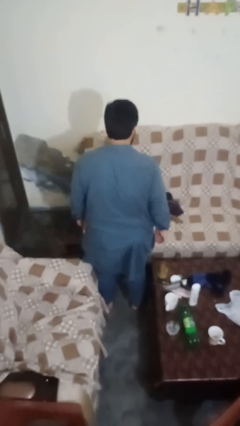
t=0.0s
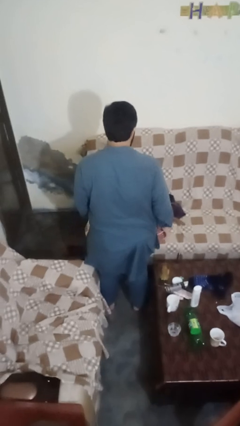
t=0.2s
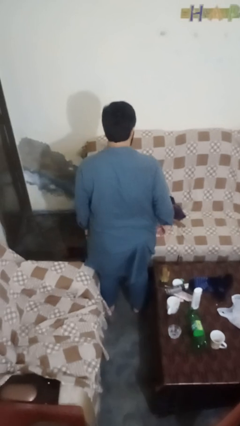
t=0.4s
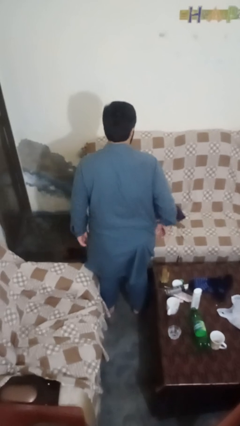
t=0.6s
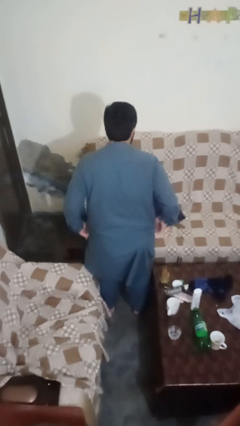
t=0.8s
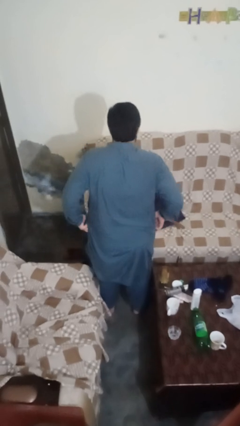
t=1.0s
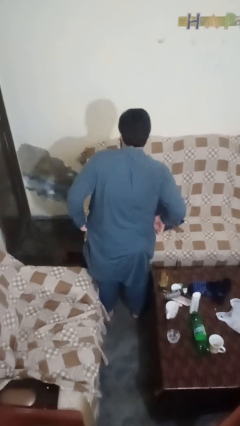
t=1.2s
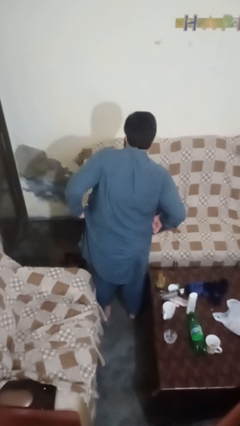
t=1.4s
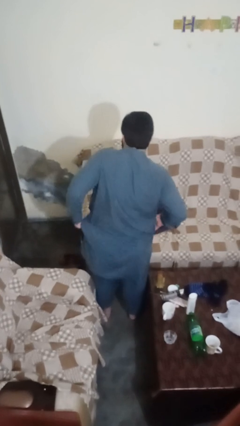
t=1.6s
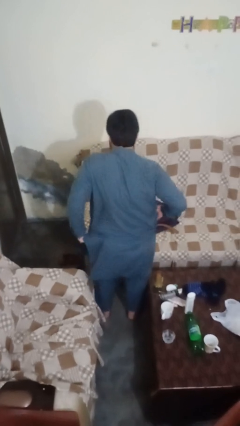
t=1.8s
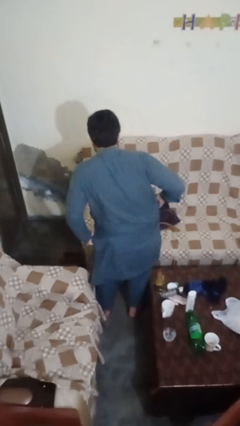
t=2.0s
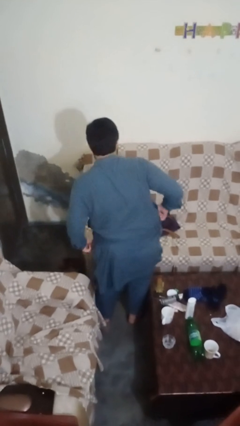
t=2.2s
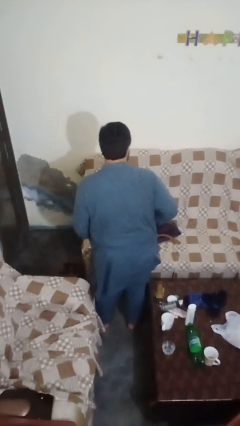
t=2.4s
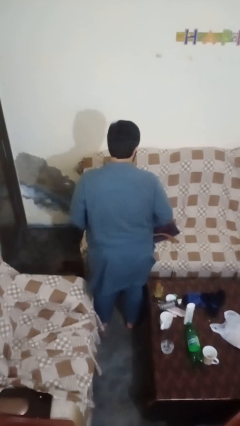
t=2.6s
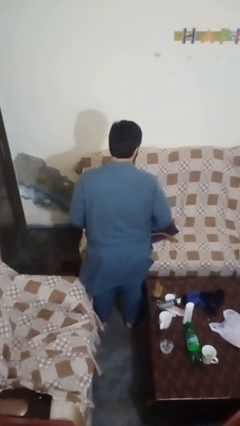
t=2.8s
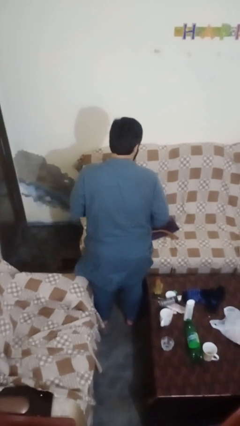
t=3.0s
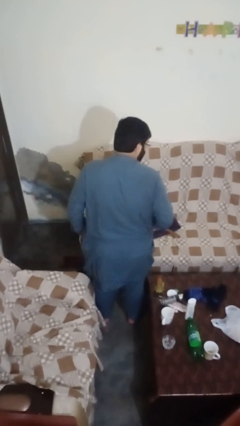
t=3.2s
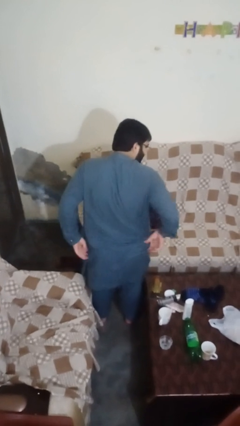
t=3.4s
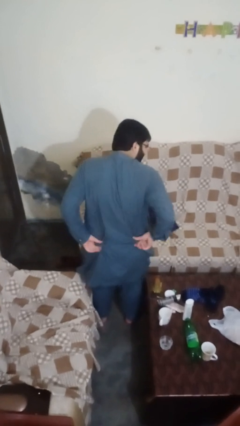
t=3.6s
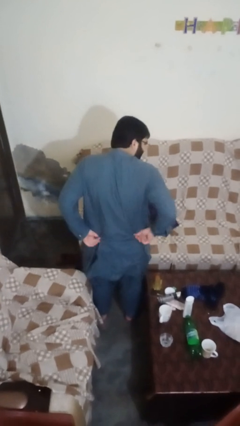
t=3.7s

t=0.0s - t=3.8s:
person hikes up pants

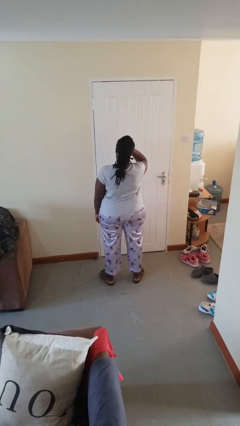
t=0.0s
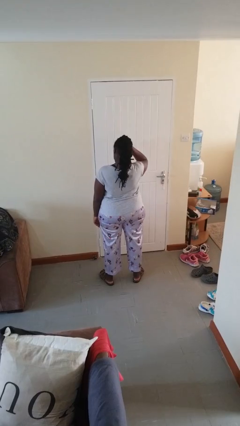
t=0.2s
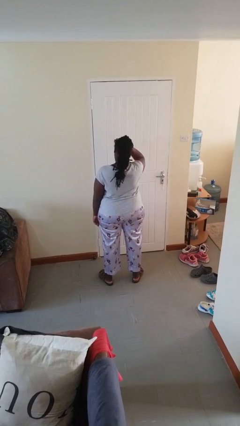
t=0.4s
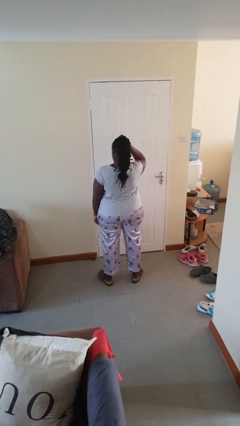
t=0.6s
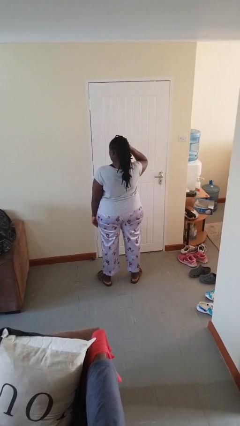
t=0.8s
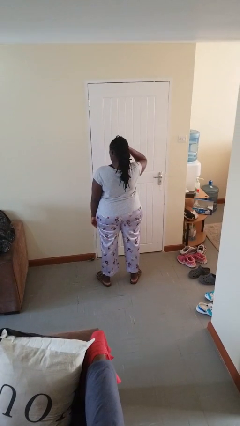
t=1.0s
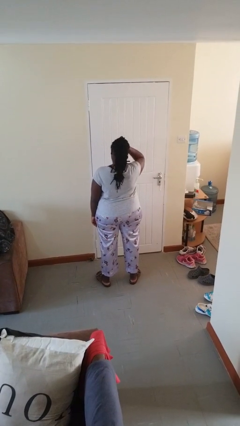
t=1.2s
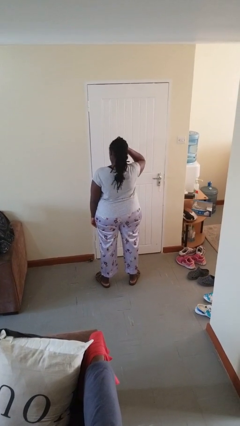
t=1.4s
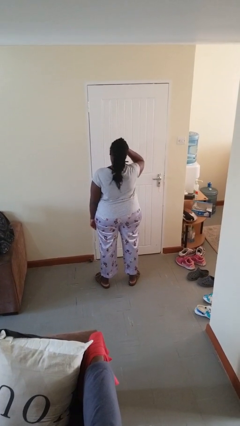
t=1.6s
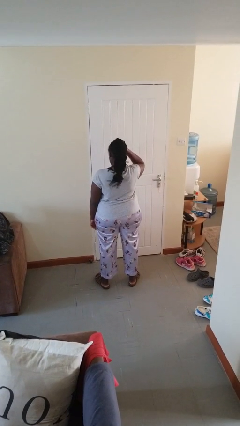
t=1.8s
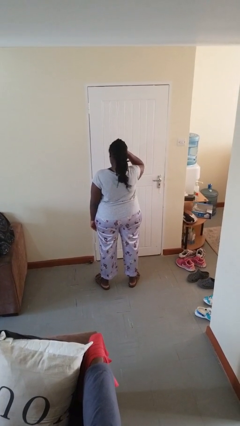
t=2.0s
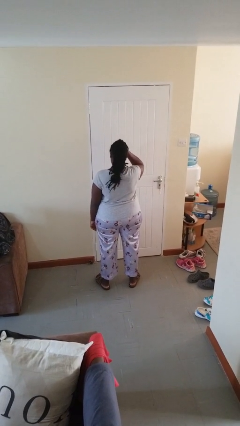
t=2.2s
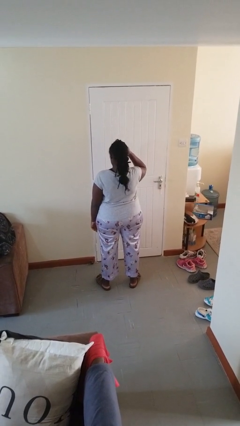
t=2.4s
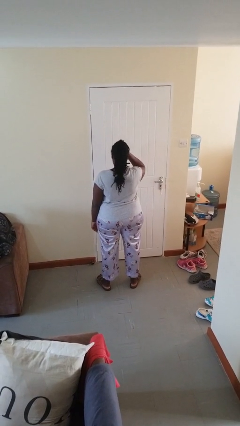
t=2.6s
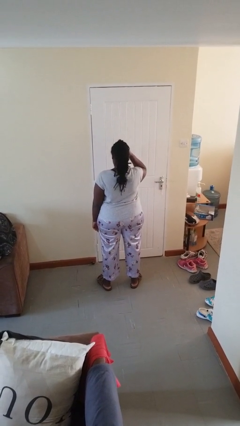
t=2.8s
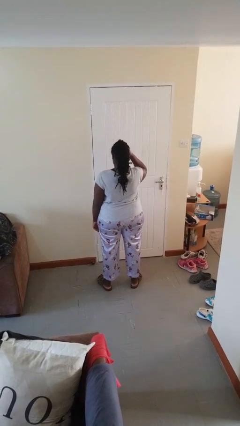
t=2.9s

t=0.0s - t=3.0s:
person scratches face

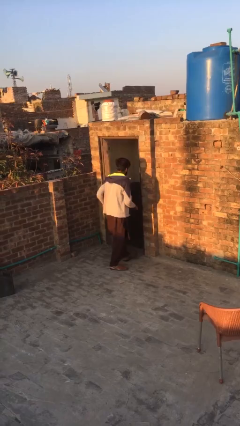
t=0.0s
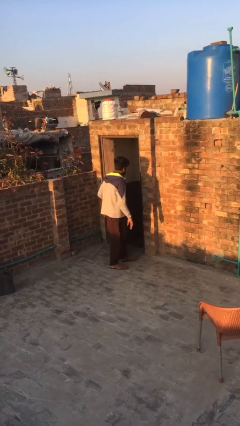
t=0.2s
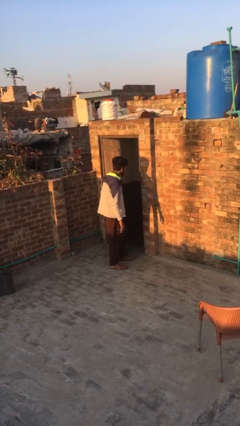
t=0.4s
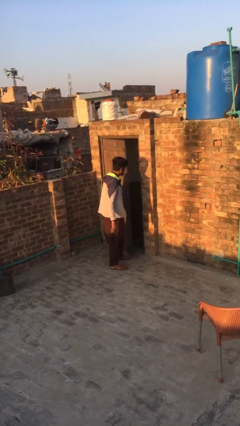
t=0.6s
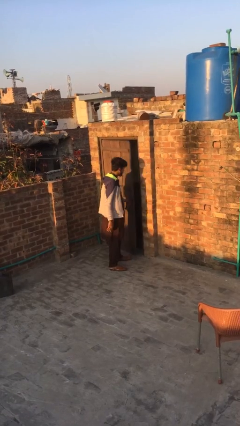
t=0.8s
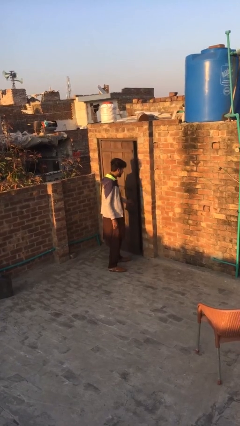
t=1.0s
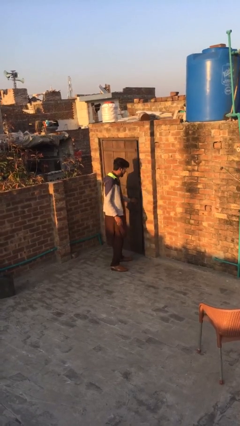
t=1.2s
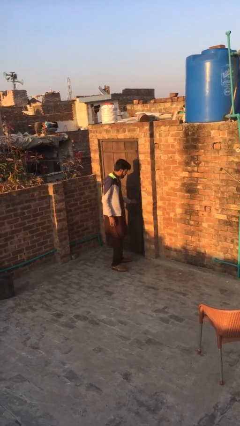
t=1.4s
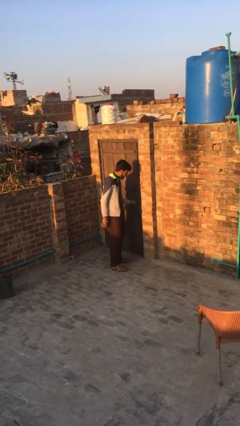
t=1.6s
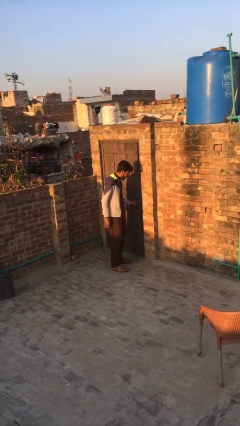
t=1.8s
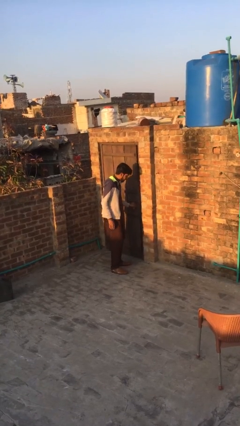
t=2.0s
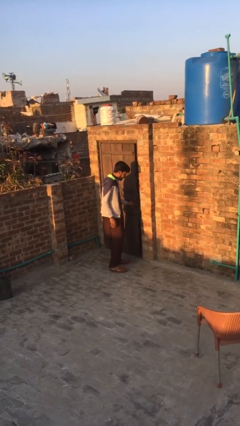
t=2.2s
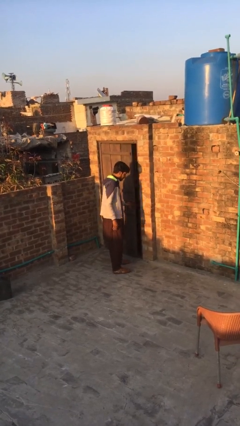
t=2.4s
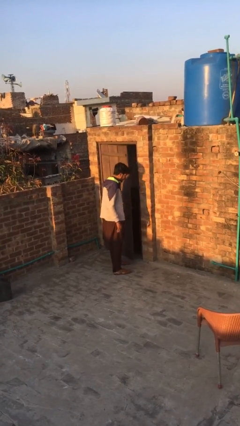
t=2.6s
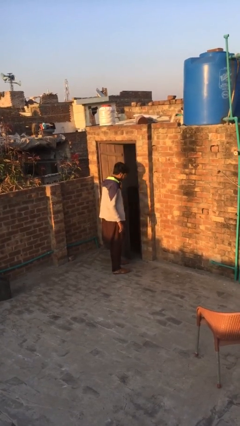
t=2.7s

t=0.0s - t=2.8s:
person closes facility door

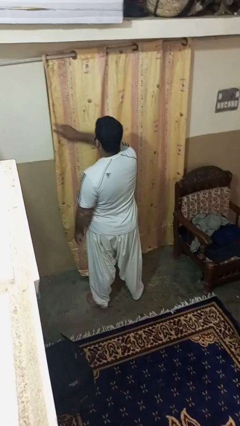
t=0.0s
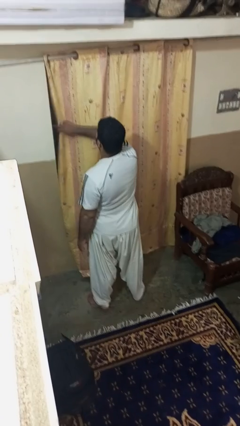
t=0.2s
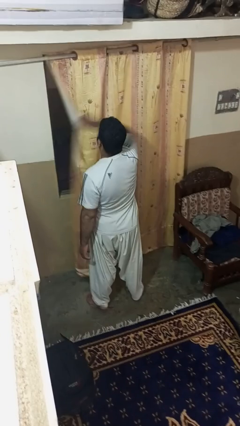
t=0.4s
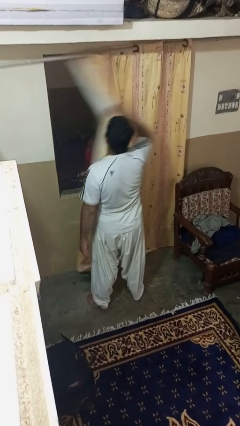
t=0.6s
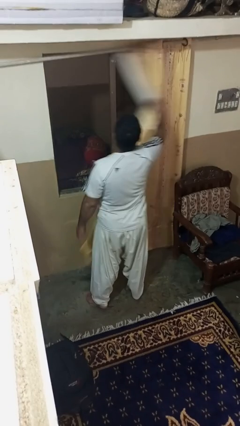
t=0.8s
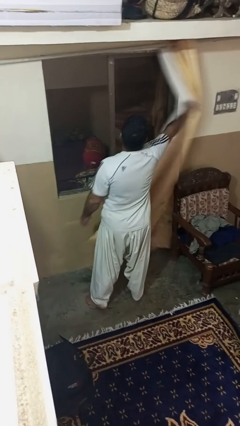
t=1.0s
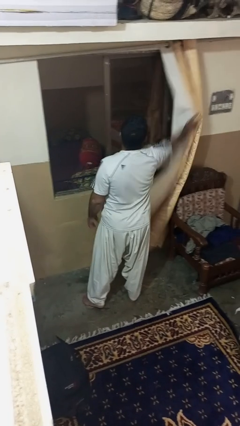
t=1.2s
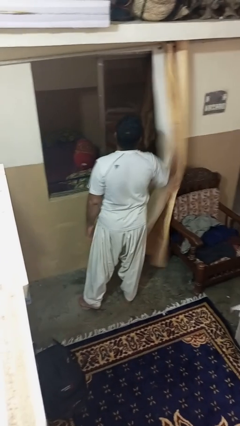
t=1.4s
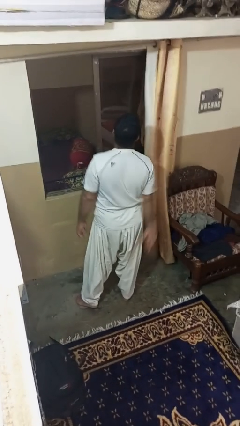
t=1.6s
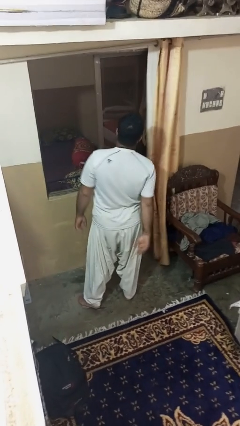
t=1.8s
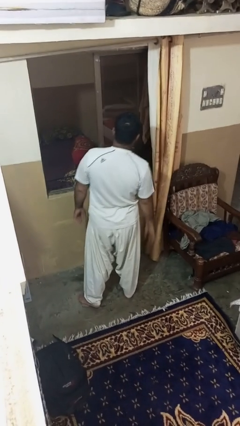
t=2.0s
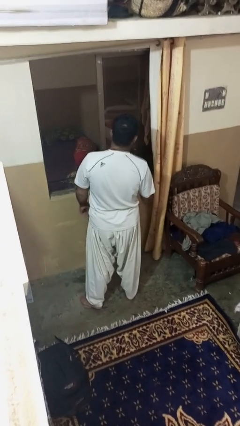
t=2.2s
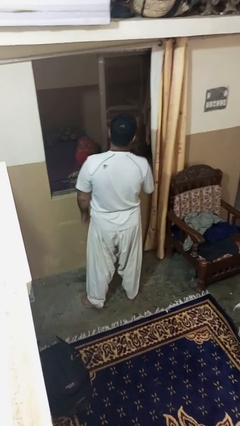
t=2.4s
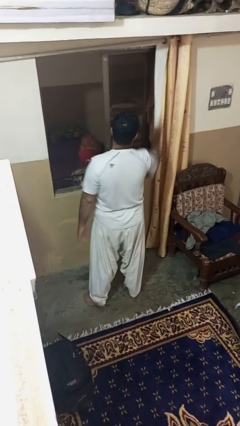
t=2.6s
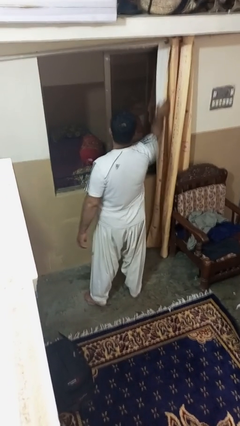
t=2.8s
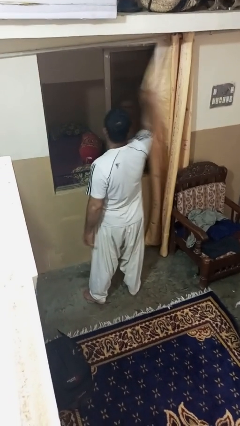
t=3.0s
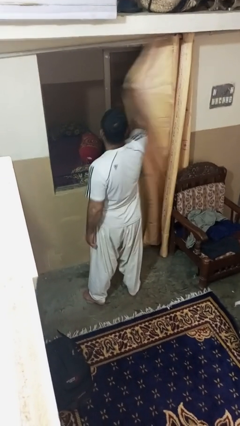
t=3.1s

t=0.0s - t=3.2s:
person opens curtains

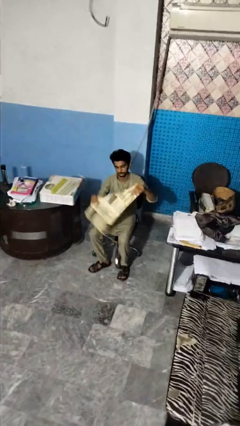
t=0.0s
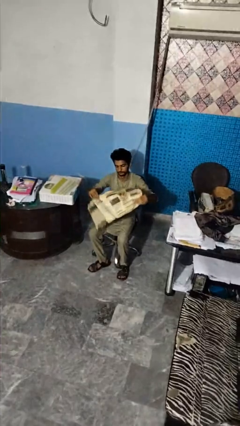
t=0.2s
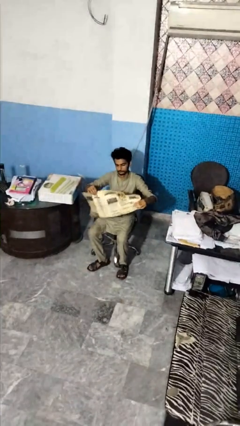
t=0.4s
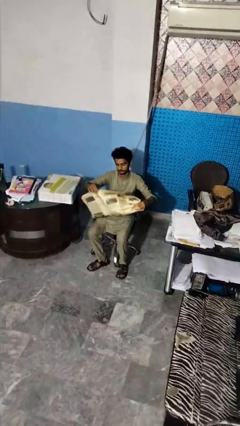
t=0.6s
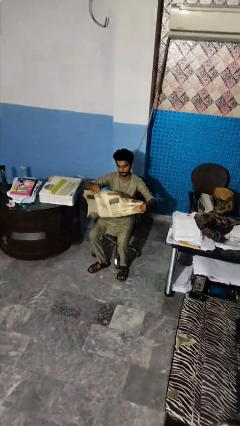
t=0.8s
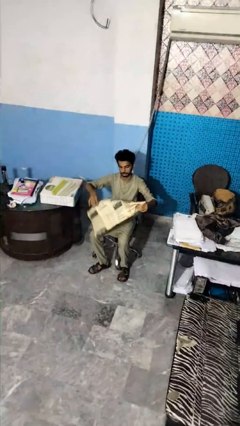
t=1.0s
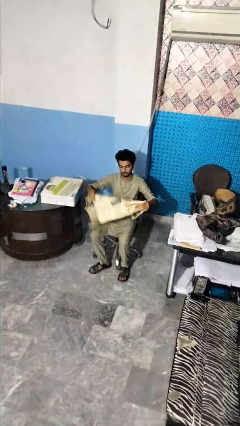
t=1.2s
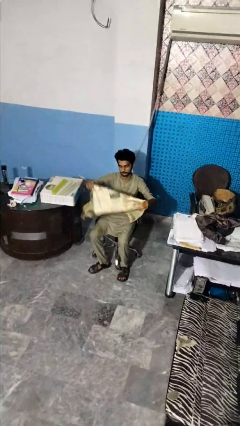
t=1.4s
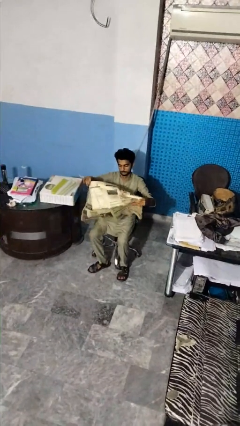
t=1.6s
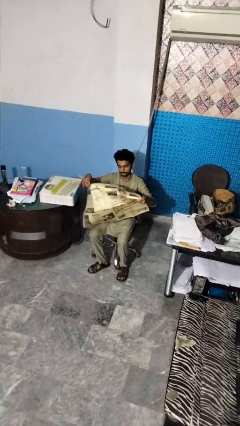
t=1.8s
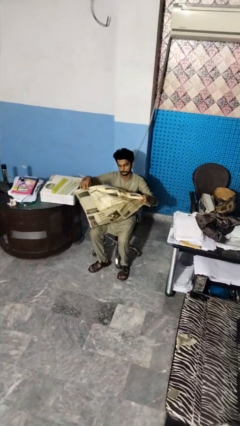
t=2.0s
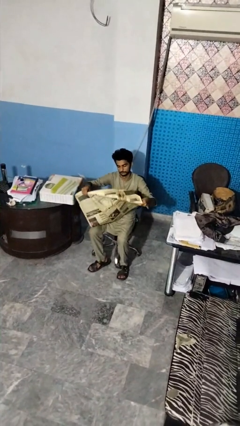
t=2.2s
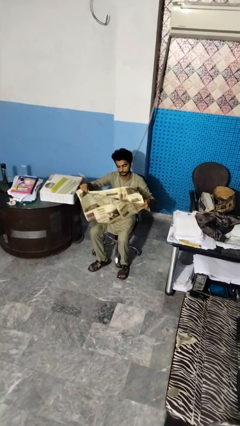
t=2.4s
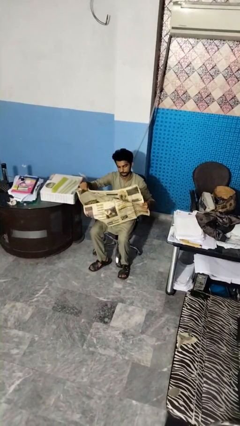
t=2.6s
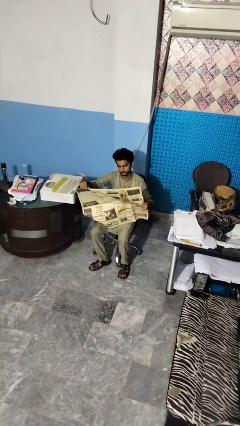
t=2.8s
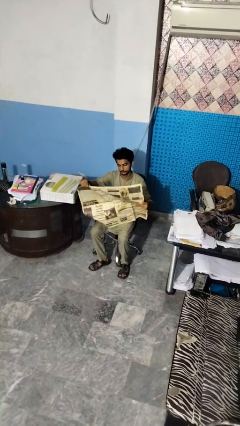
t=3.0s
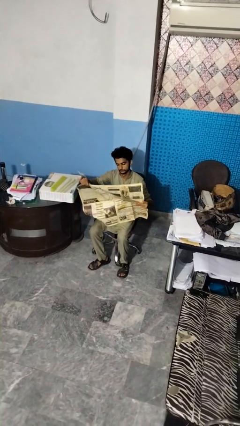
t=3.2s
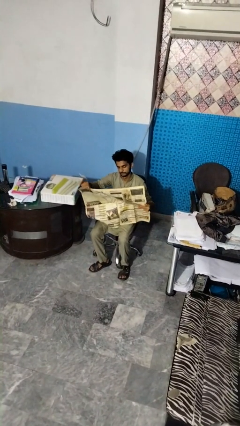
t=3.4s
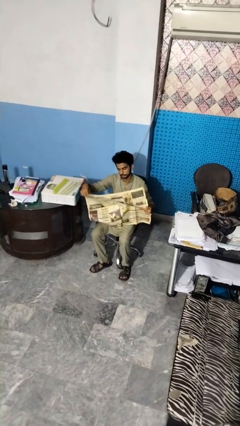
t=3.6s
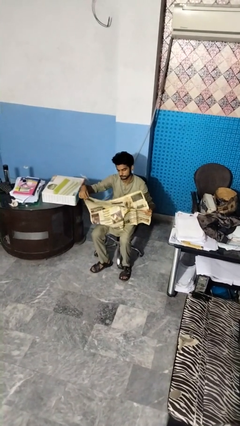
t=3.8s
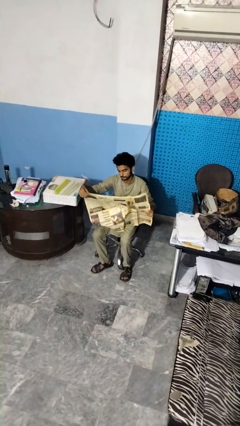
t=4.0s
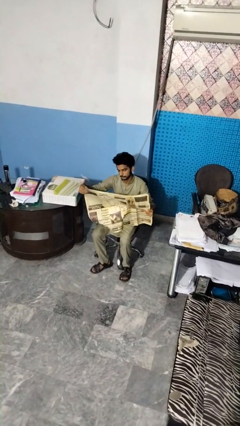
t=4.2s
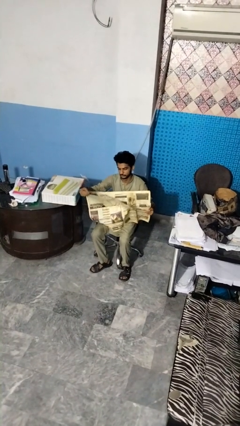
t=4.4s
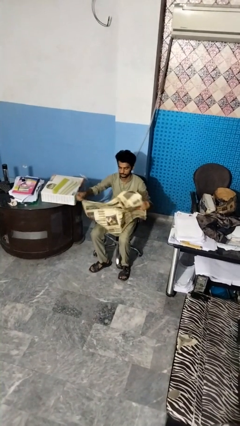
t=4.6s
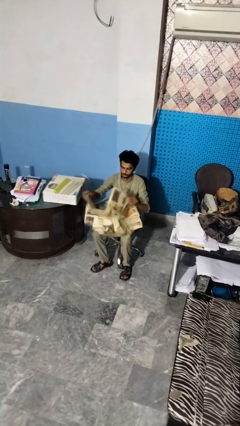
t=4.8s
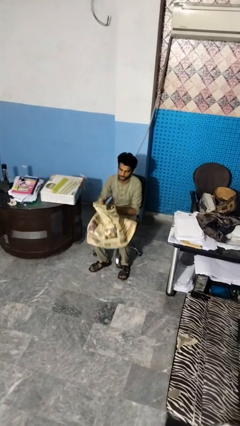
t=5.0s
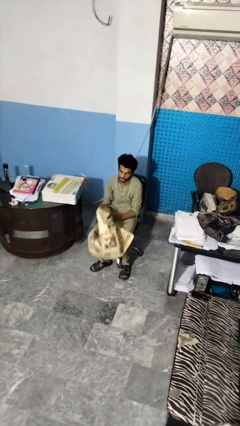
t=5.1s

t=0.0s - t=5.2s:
person reads newspaper
